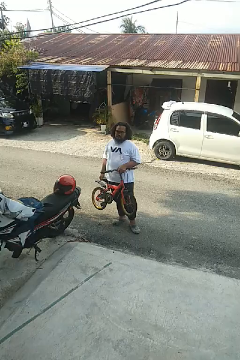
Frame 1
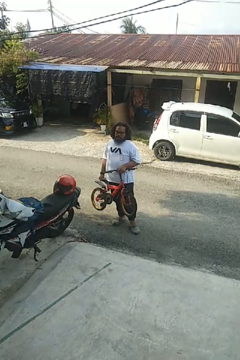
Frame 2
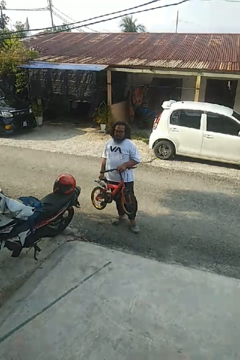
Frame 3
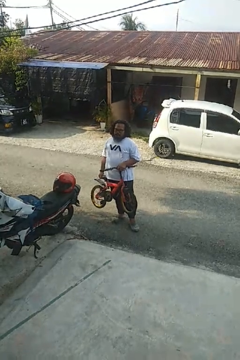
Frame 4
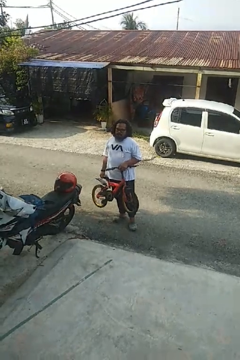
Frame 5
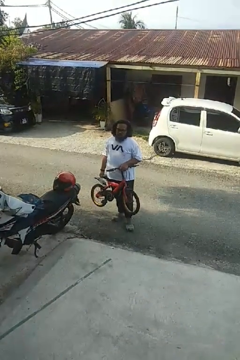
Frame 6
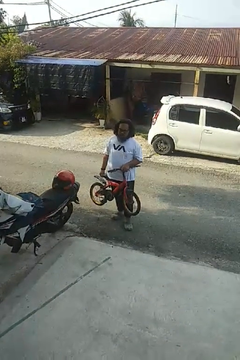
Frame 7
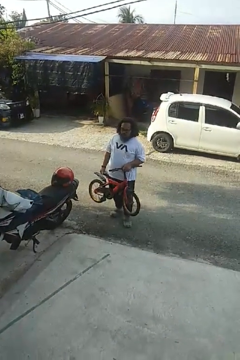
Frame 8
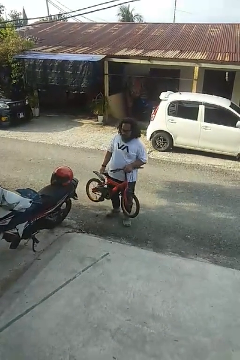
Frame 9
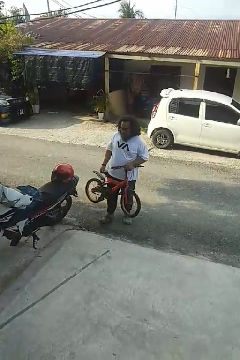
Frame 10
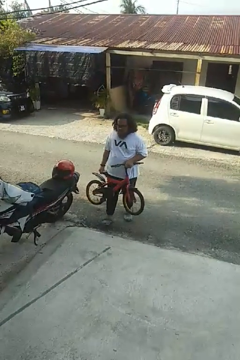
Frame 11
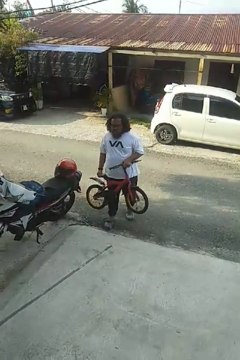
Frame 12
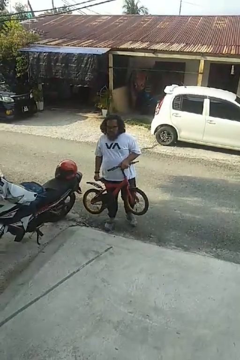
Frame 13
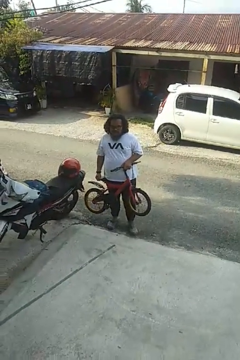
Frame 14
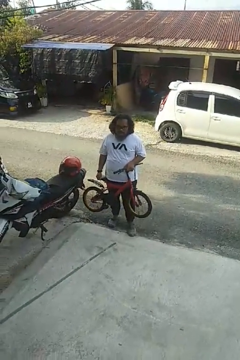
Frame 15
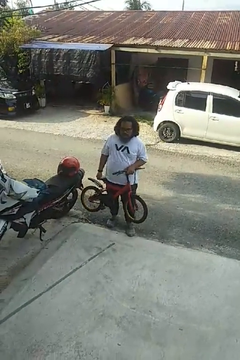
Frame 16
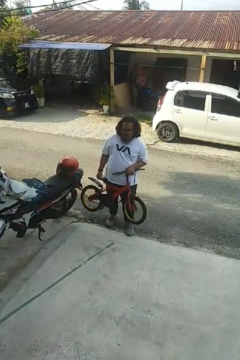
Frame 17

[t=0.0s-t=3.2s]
person carries bicycle

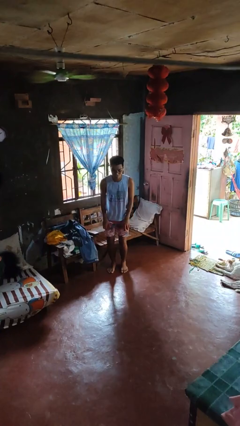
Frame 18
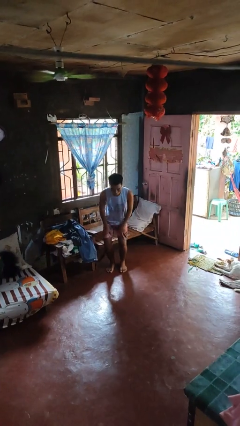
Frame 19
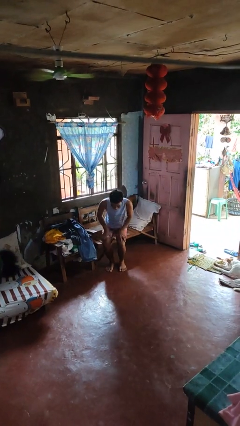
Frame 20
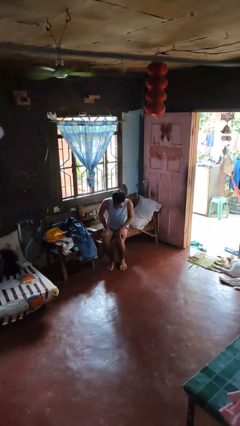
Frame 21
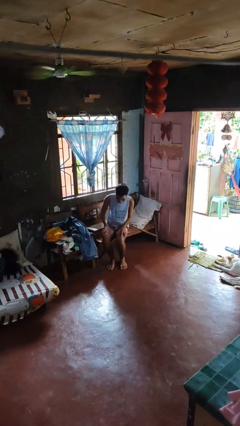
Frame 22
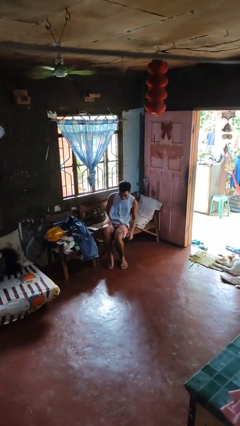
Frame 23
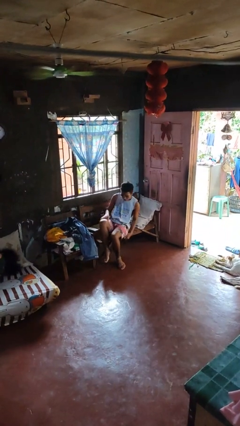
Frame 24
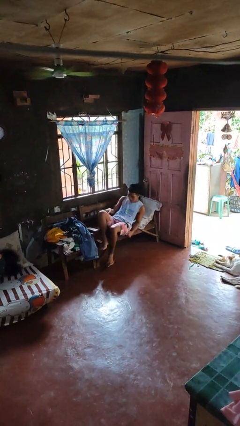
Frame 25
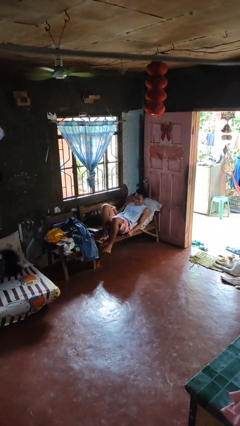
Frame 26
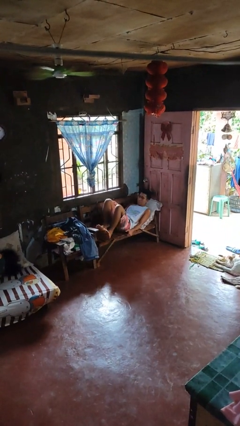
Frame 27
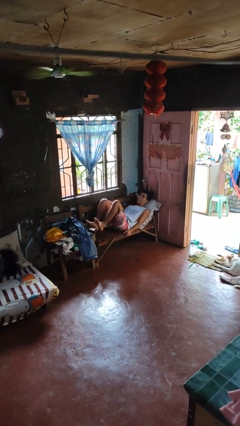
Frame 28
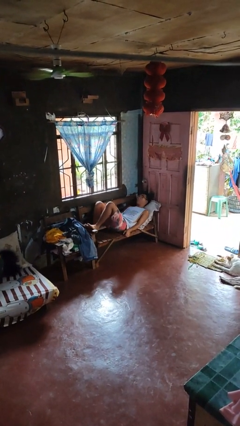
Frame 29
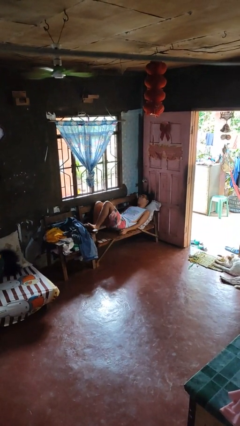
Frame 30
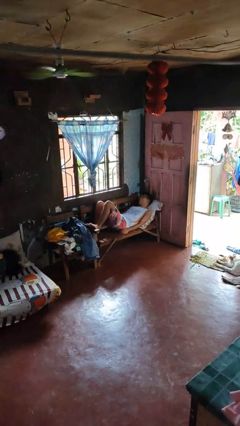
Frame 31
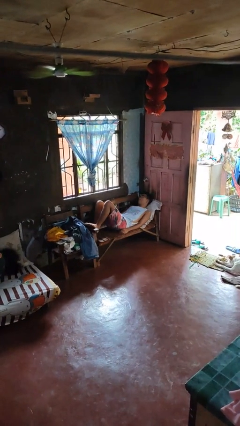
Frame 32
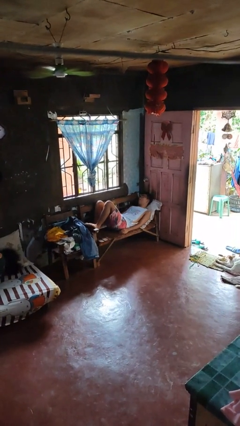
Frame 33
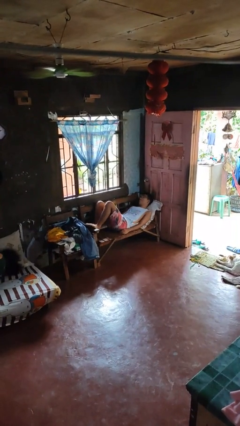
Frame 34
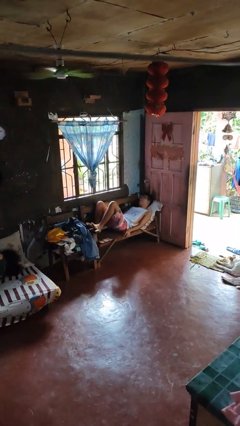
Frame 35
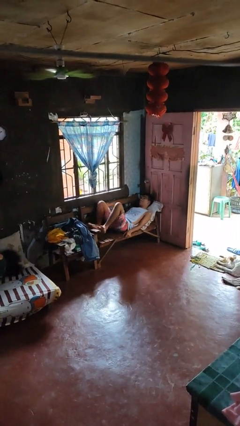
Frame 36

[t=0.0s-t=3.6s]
person lies down on couch

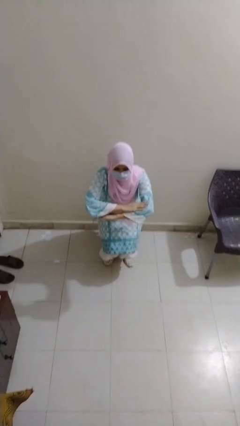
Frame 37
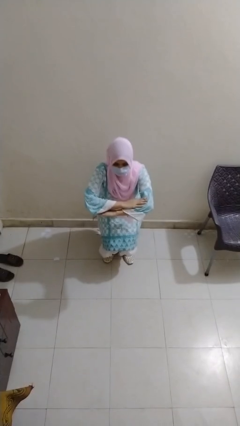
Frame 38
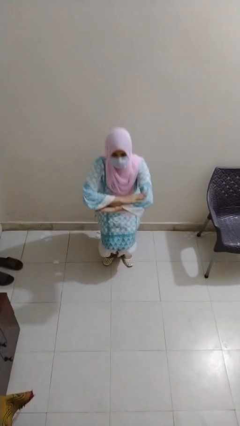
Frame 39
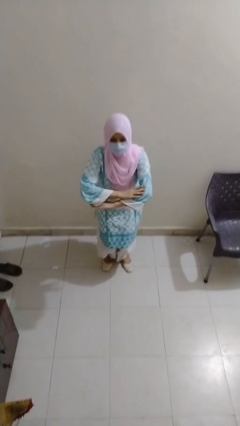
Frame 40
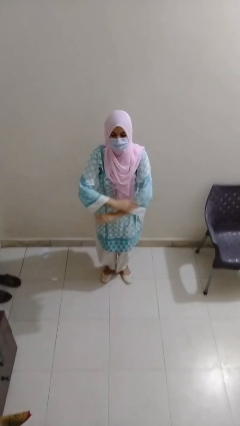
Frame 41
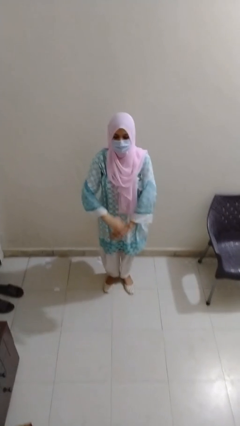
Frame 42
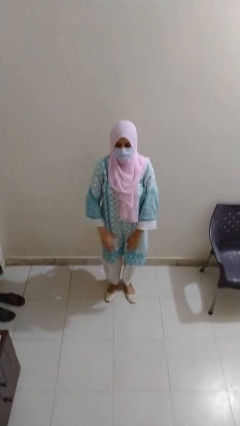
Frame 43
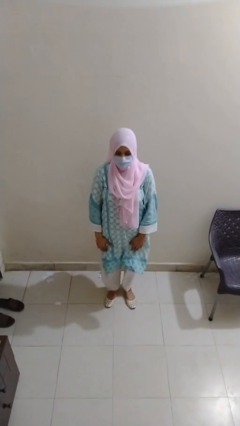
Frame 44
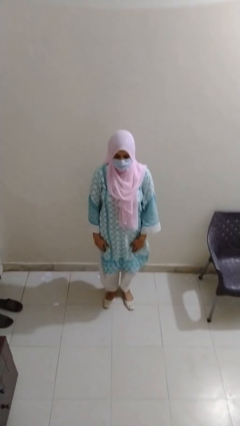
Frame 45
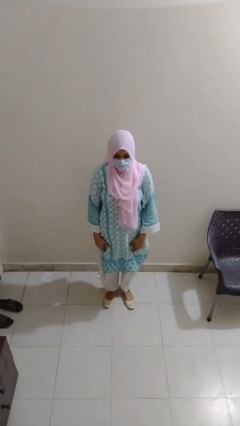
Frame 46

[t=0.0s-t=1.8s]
person stands up

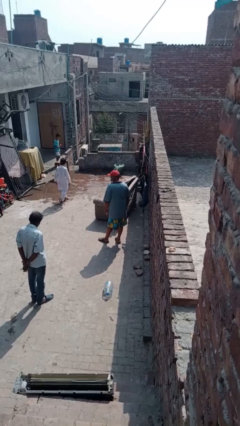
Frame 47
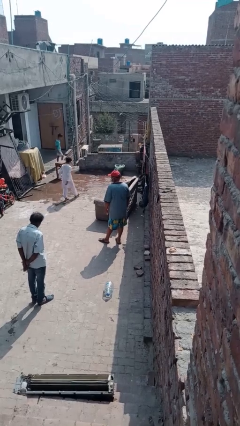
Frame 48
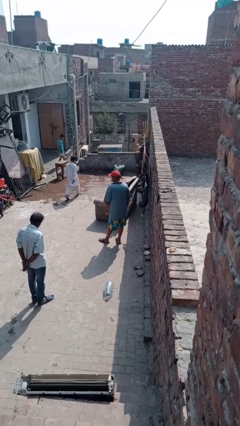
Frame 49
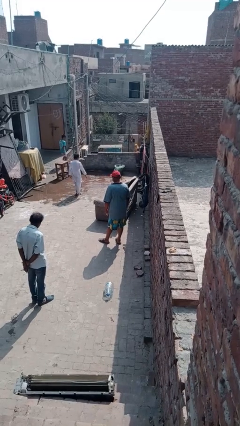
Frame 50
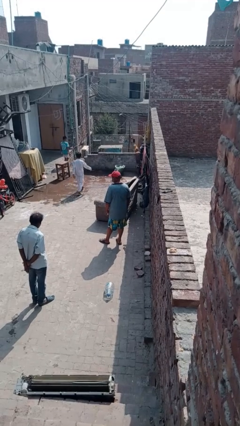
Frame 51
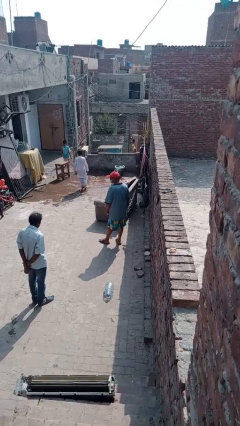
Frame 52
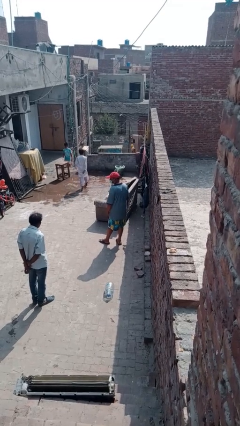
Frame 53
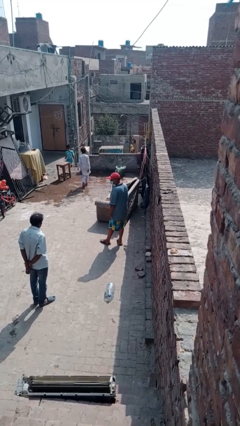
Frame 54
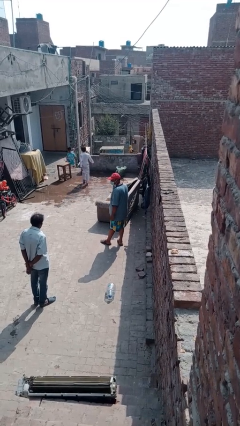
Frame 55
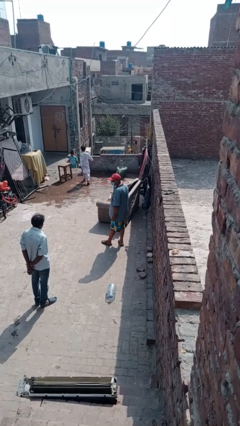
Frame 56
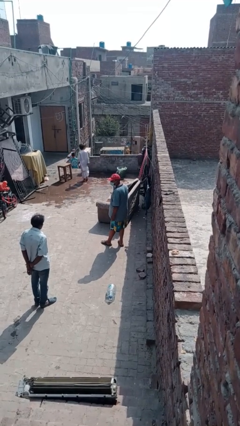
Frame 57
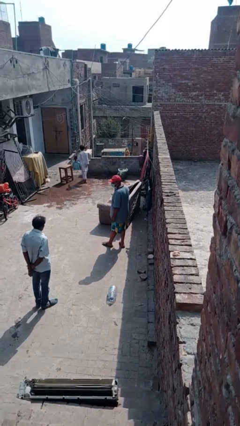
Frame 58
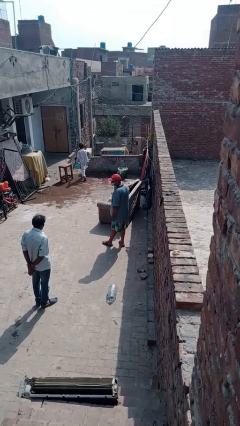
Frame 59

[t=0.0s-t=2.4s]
person looks over shoulder

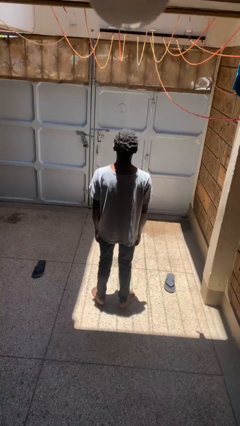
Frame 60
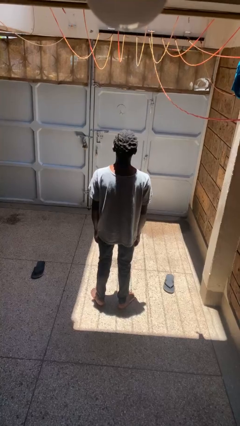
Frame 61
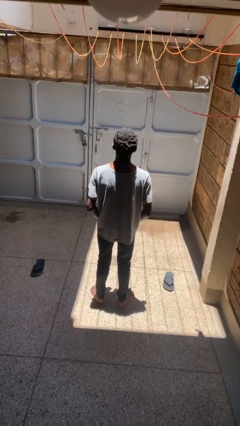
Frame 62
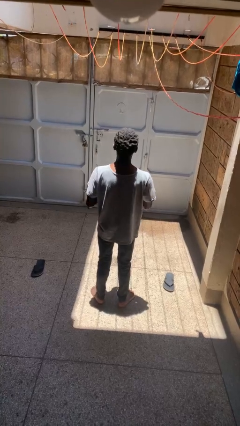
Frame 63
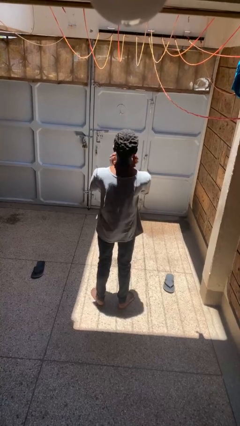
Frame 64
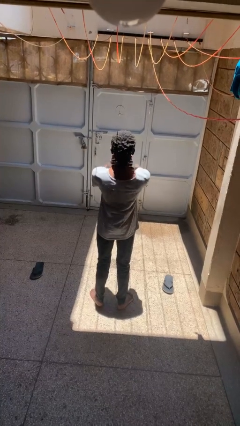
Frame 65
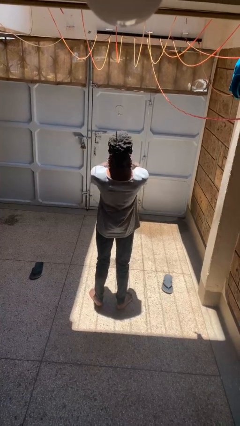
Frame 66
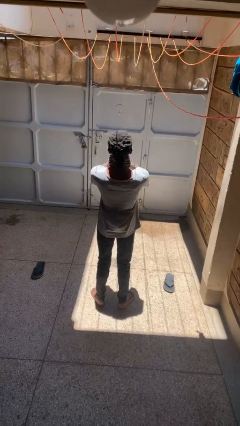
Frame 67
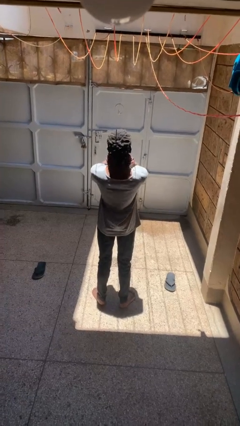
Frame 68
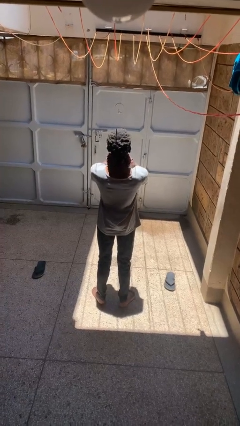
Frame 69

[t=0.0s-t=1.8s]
person rubs neck

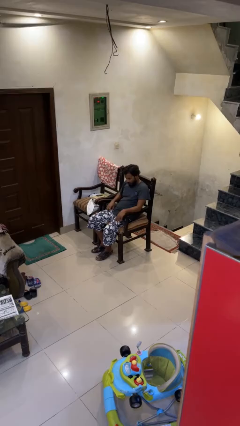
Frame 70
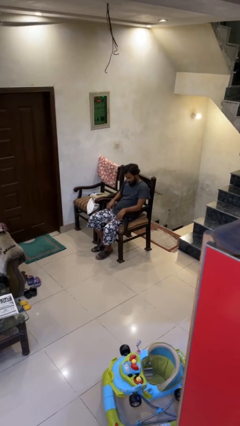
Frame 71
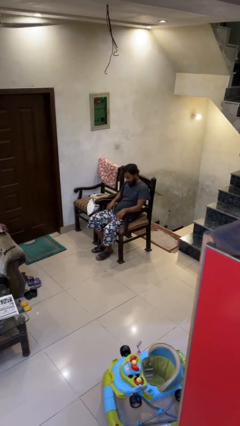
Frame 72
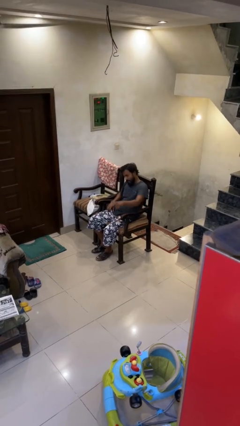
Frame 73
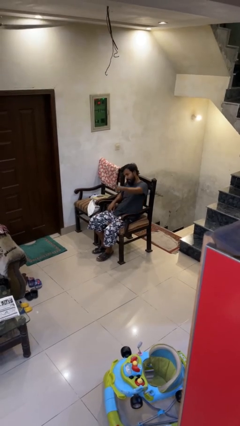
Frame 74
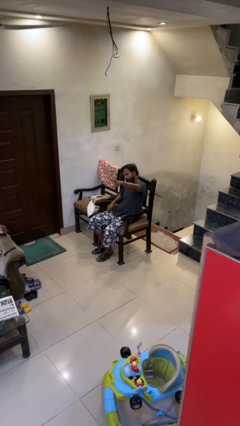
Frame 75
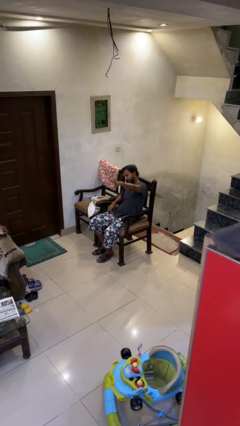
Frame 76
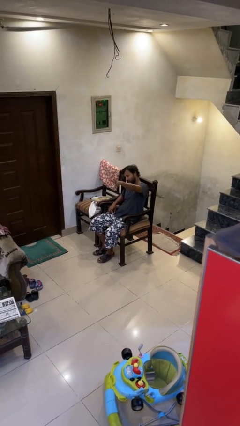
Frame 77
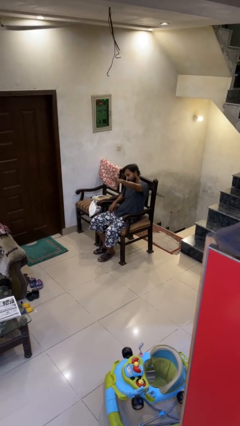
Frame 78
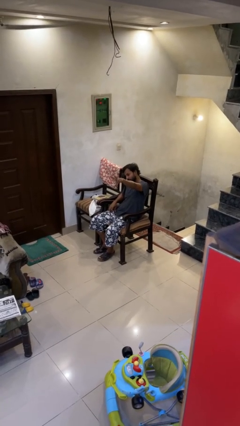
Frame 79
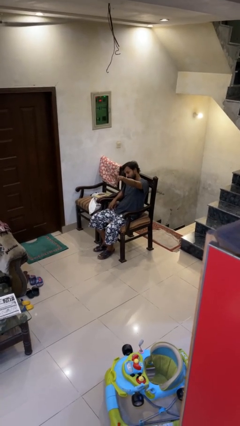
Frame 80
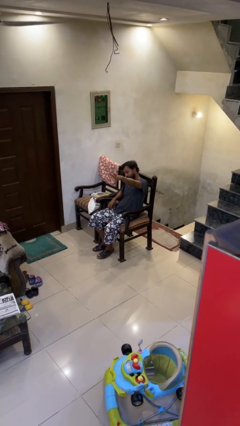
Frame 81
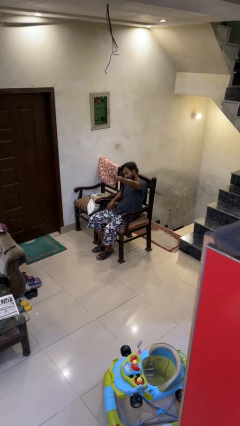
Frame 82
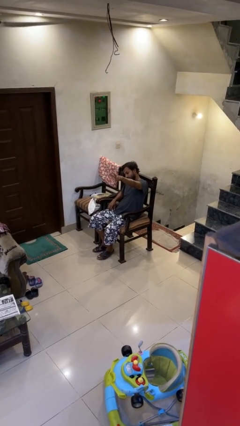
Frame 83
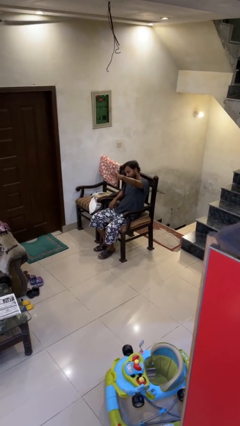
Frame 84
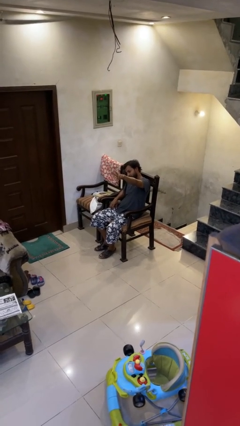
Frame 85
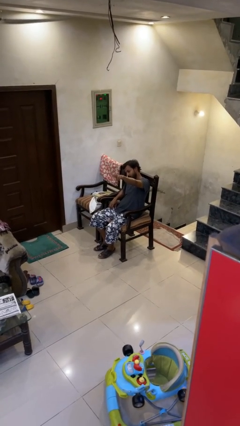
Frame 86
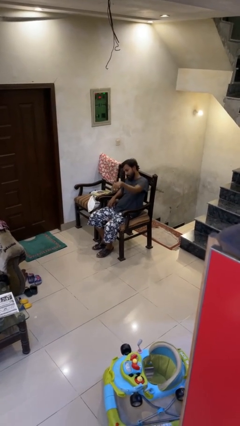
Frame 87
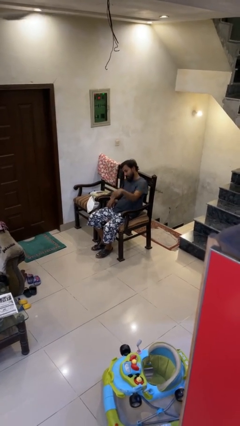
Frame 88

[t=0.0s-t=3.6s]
person gestures peace

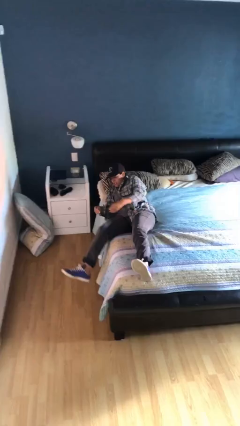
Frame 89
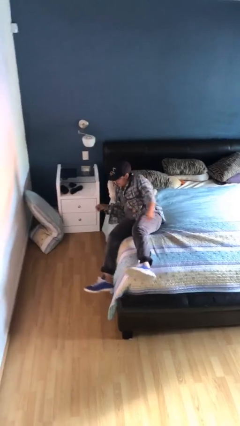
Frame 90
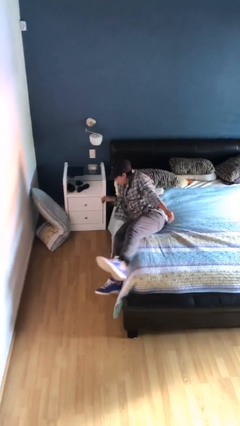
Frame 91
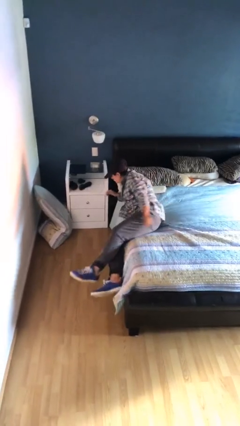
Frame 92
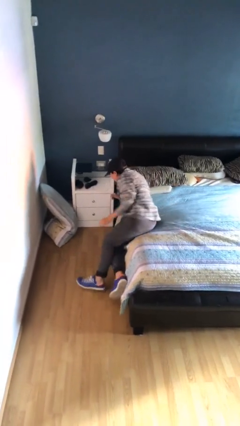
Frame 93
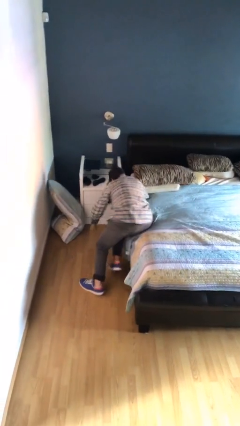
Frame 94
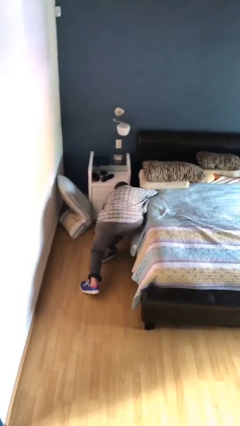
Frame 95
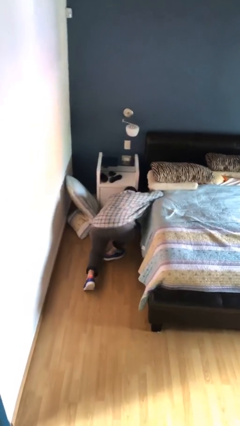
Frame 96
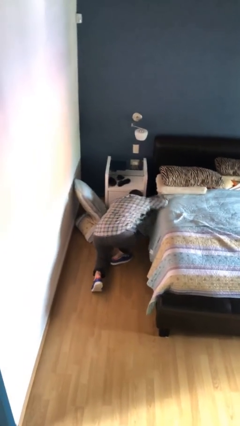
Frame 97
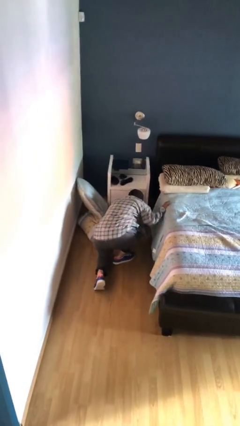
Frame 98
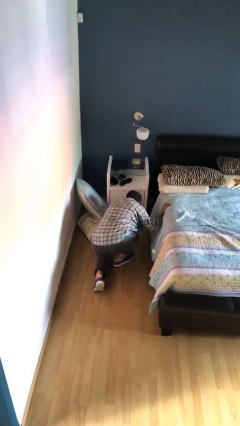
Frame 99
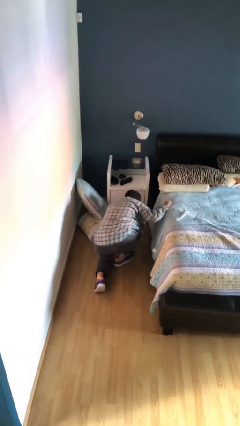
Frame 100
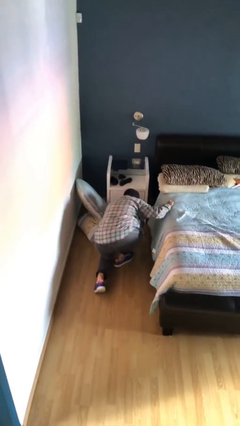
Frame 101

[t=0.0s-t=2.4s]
person falls from bed
